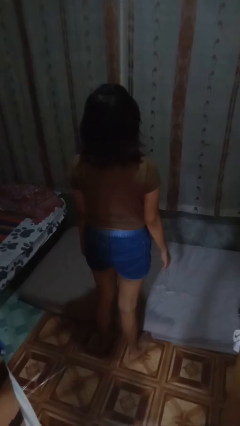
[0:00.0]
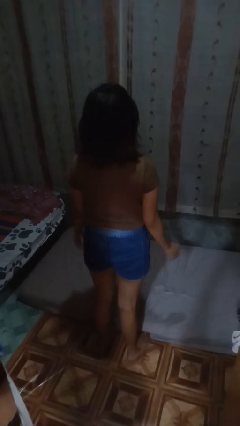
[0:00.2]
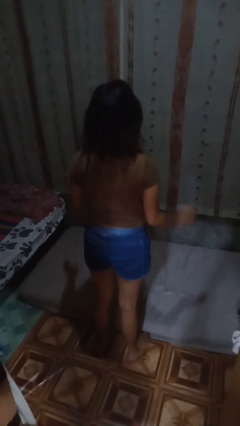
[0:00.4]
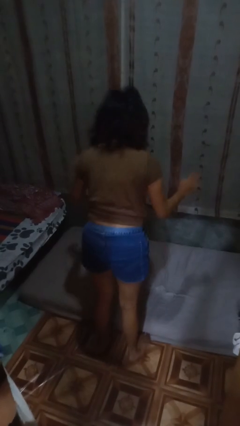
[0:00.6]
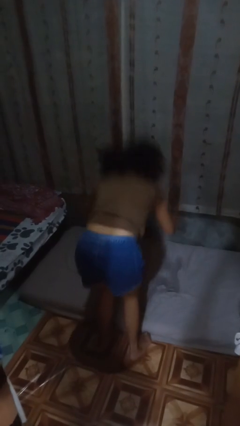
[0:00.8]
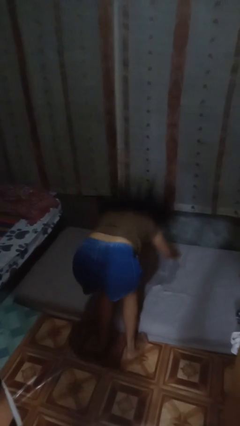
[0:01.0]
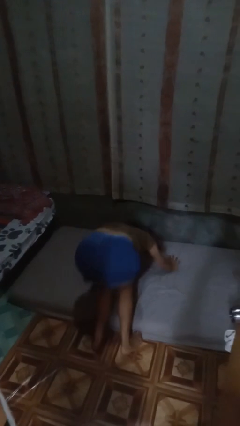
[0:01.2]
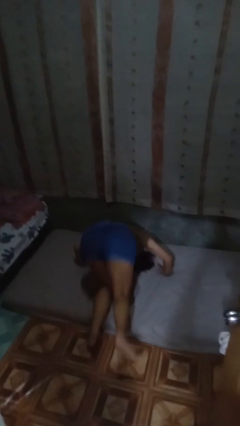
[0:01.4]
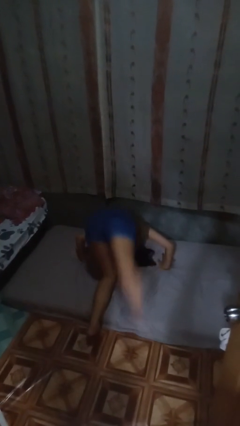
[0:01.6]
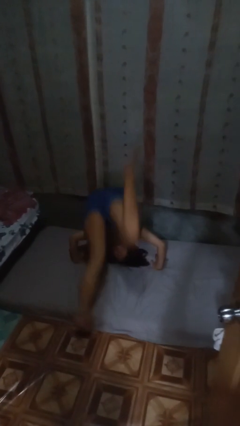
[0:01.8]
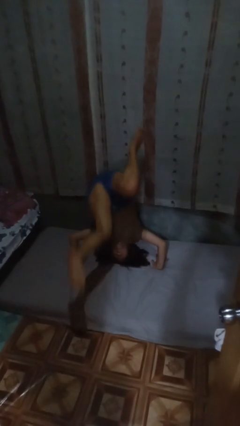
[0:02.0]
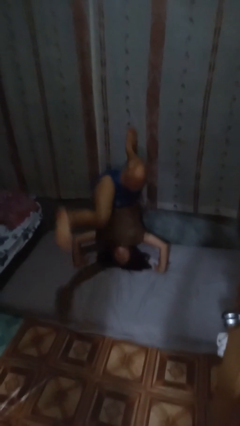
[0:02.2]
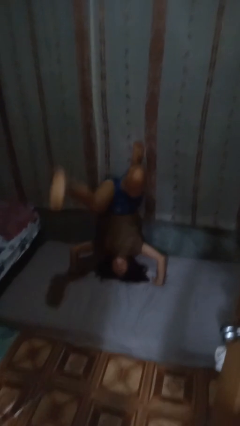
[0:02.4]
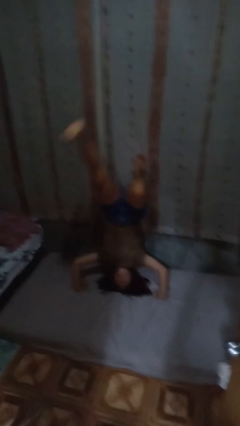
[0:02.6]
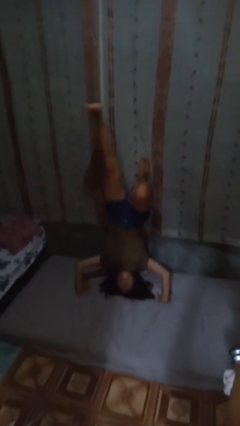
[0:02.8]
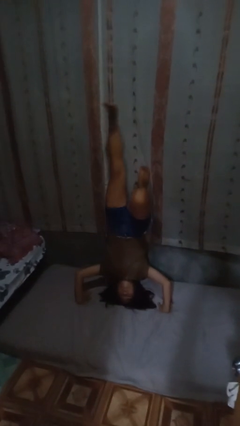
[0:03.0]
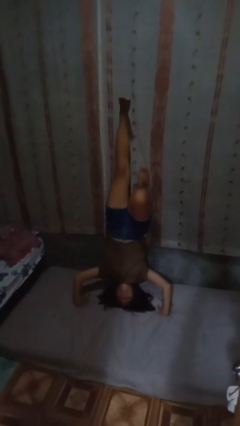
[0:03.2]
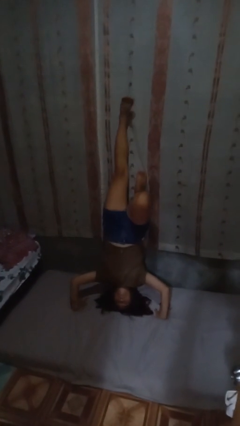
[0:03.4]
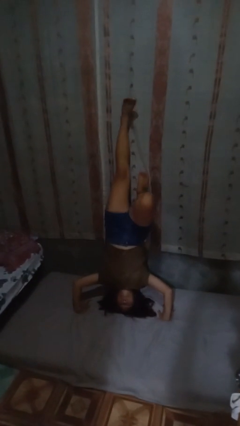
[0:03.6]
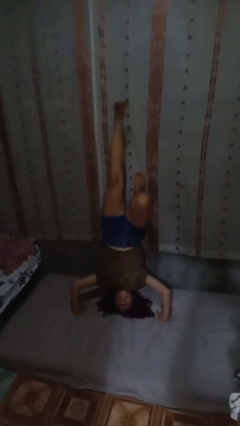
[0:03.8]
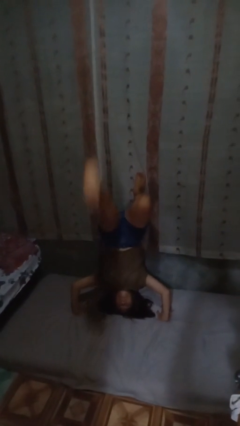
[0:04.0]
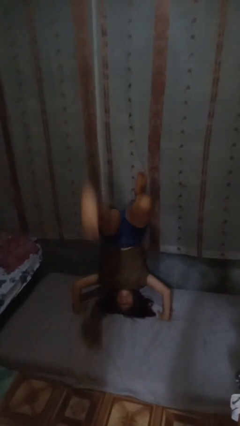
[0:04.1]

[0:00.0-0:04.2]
person handstand

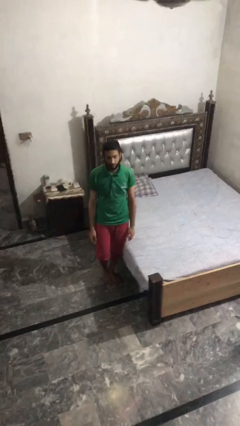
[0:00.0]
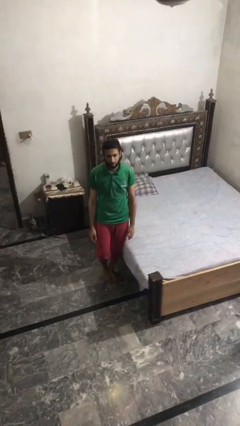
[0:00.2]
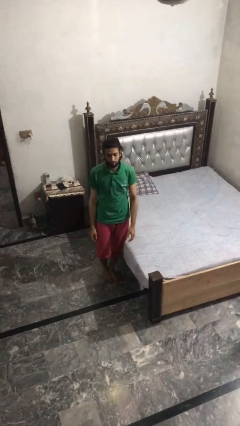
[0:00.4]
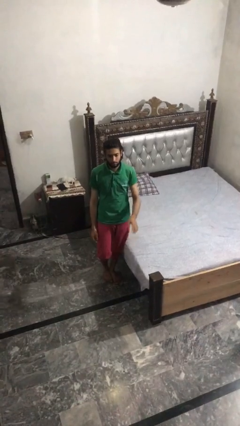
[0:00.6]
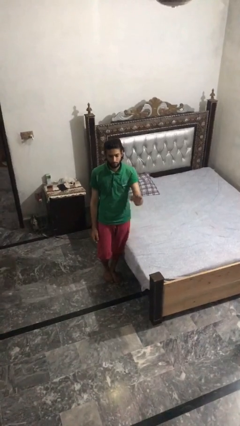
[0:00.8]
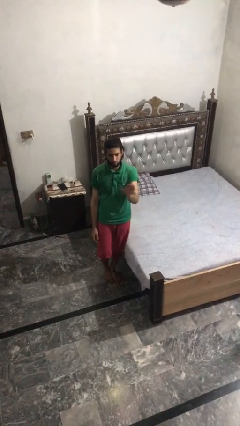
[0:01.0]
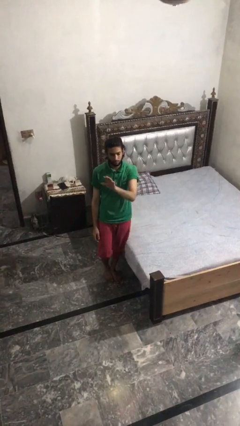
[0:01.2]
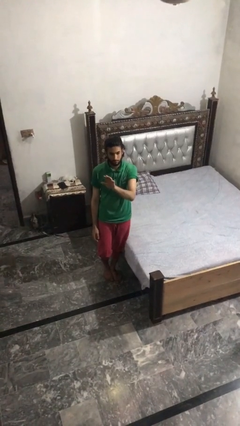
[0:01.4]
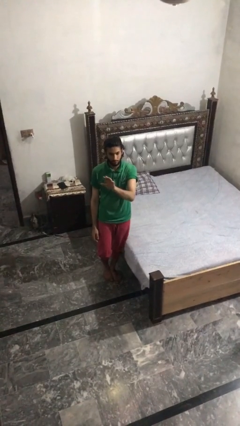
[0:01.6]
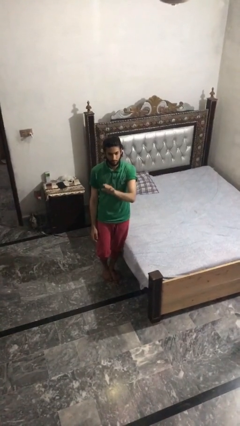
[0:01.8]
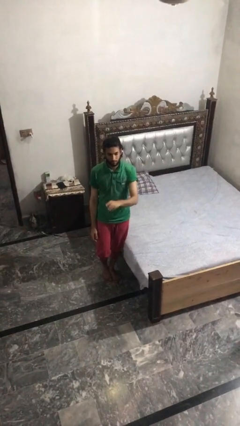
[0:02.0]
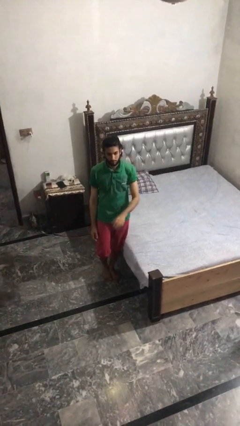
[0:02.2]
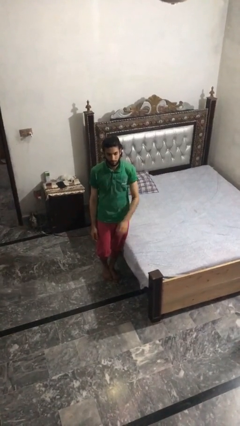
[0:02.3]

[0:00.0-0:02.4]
person gestures swipe left

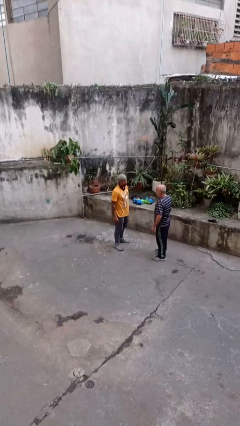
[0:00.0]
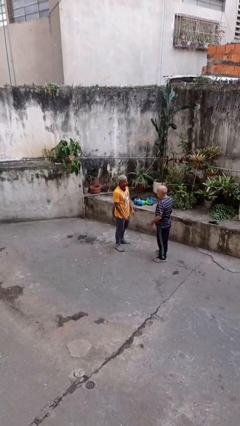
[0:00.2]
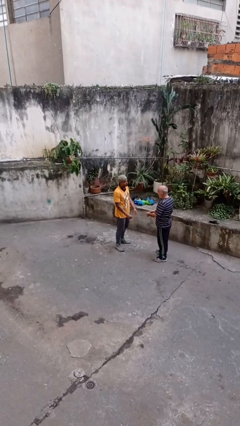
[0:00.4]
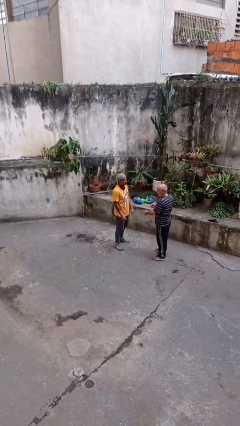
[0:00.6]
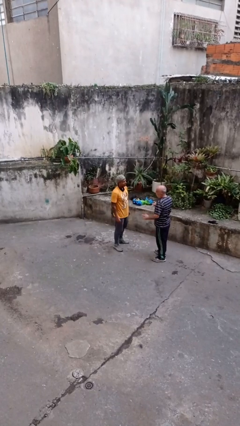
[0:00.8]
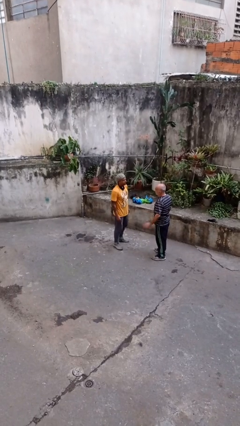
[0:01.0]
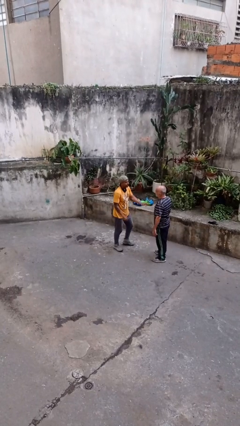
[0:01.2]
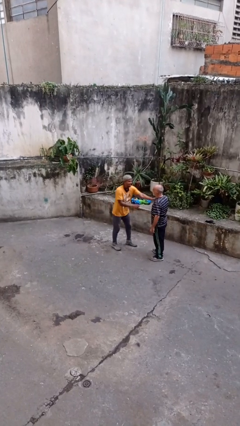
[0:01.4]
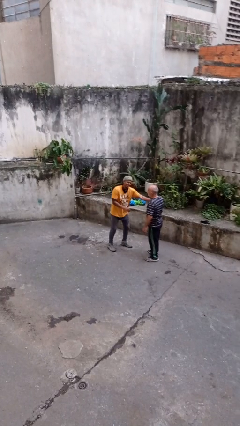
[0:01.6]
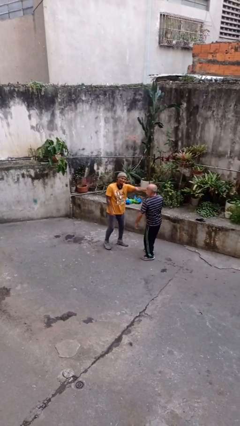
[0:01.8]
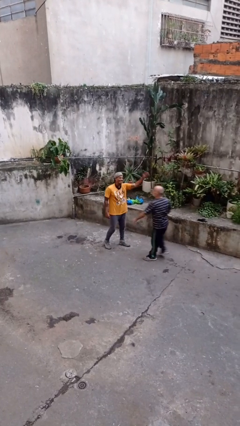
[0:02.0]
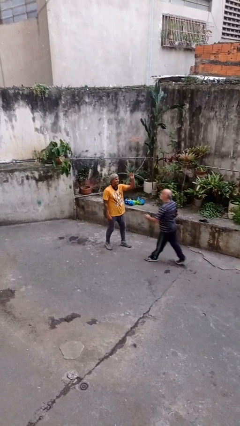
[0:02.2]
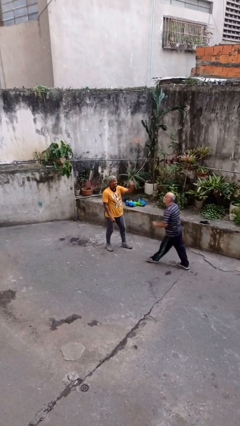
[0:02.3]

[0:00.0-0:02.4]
person shoves person

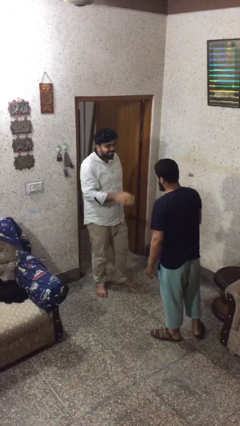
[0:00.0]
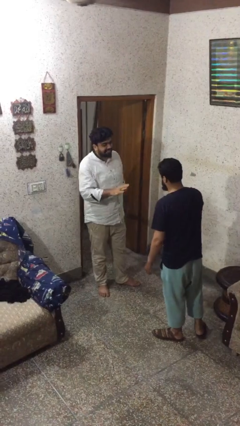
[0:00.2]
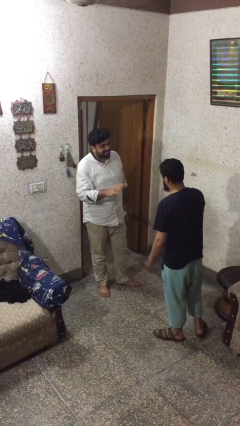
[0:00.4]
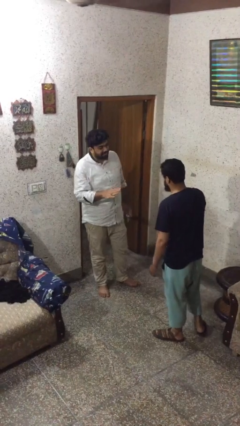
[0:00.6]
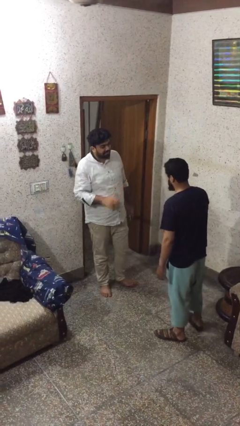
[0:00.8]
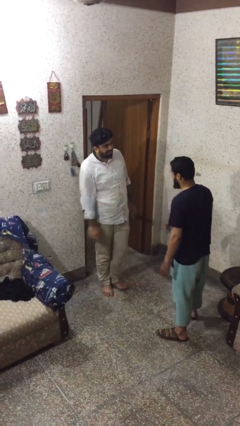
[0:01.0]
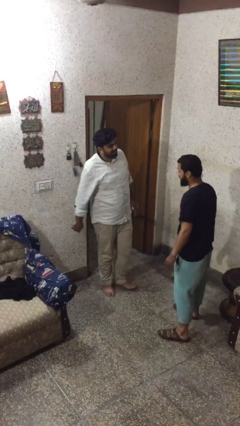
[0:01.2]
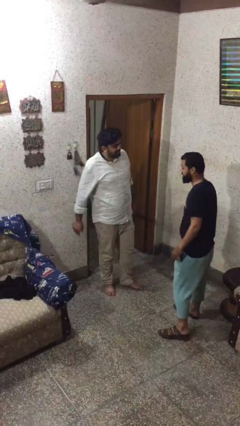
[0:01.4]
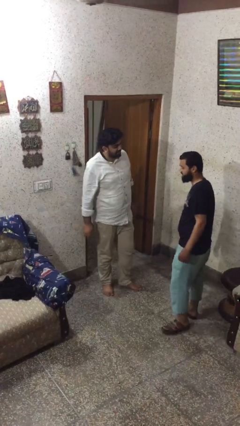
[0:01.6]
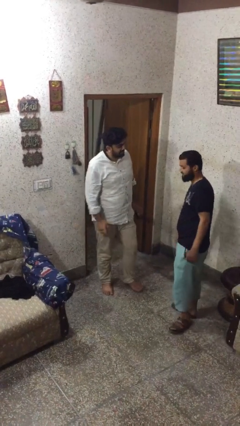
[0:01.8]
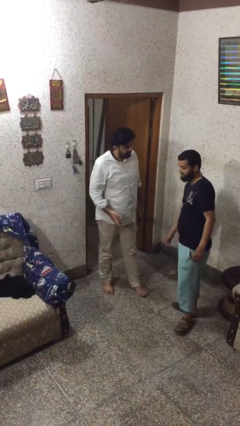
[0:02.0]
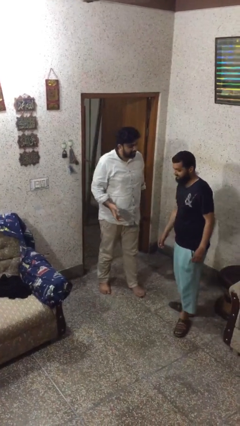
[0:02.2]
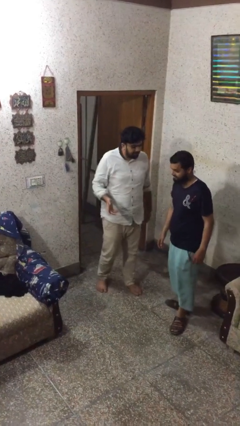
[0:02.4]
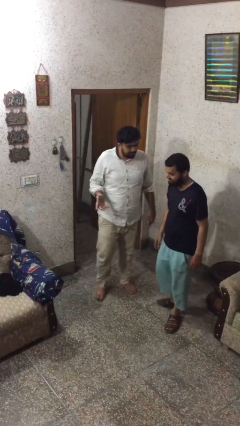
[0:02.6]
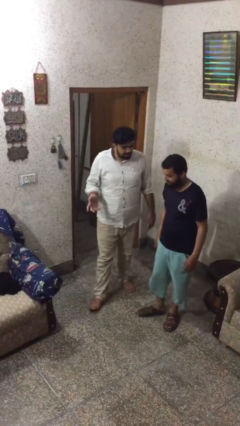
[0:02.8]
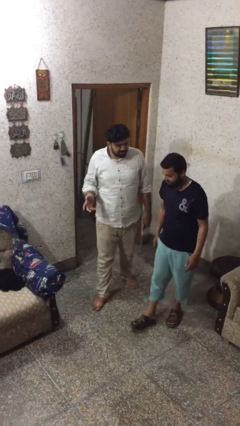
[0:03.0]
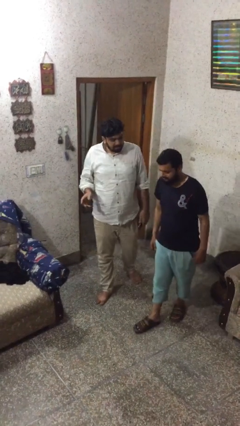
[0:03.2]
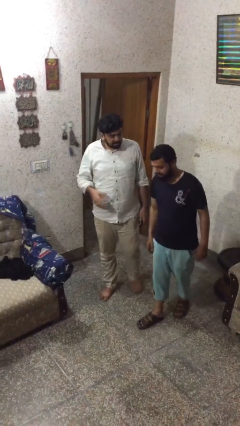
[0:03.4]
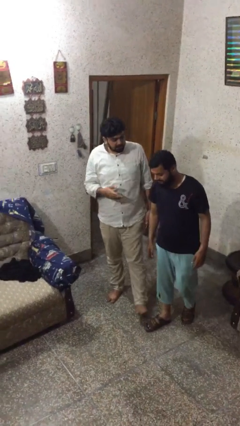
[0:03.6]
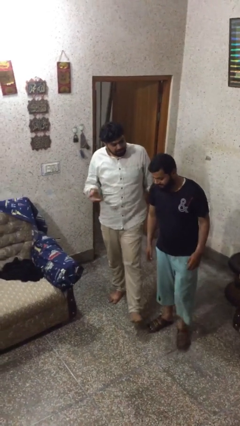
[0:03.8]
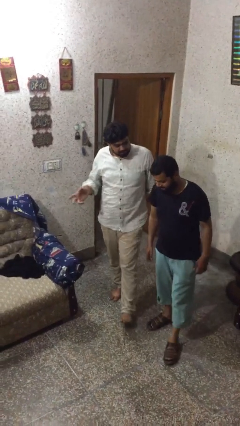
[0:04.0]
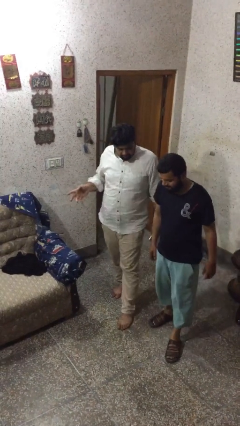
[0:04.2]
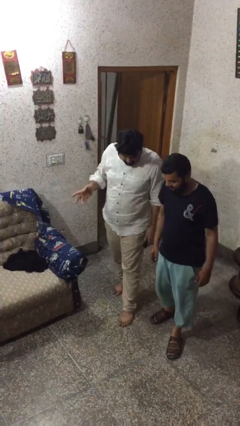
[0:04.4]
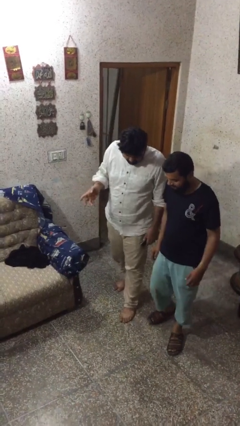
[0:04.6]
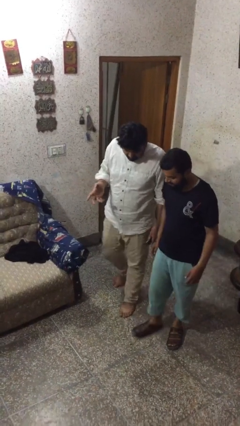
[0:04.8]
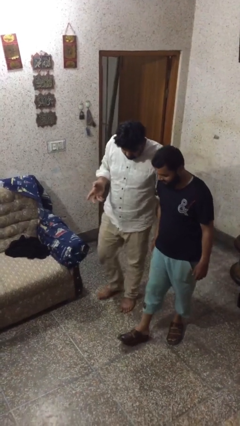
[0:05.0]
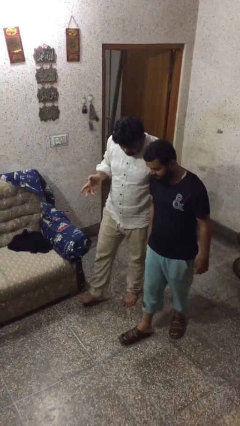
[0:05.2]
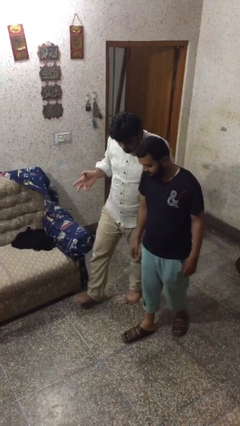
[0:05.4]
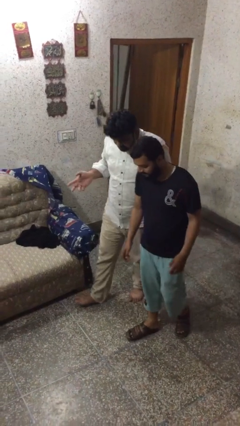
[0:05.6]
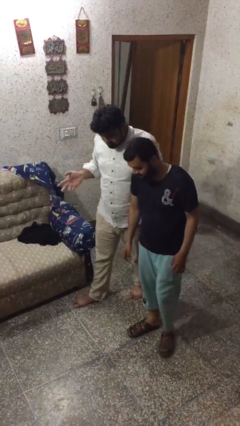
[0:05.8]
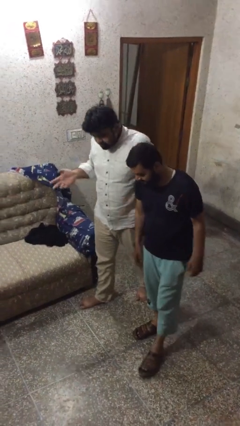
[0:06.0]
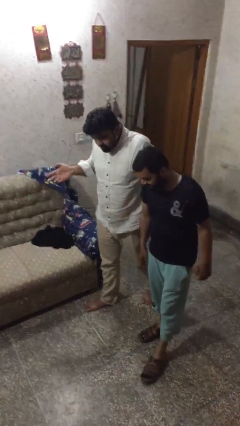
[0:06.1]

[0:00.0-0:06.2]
person talks to person

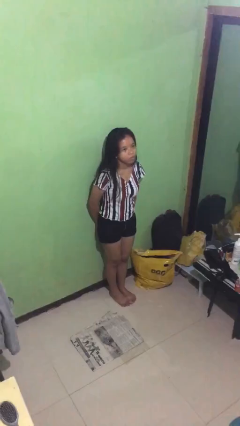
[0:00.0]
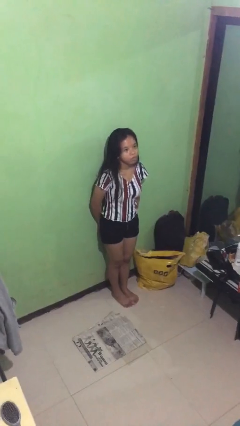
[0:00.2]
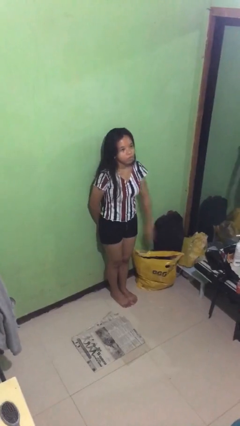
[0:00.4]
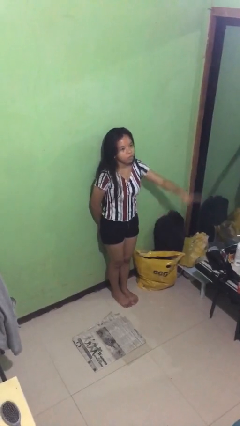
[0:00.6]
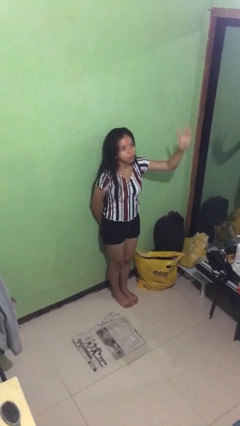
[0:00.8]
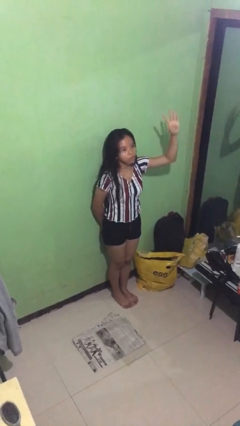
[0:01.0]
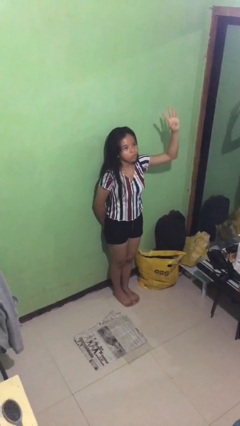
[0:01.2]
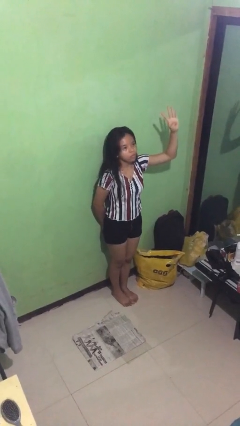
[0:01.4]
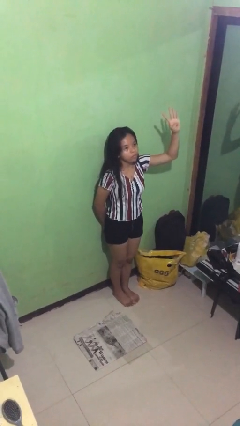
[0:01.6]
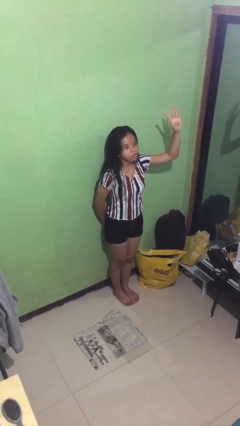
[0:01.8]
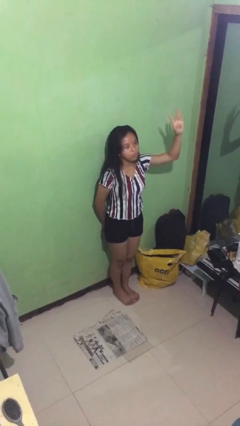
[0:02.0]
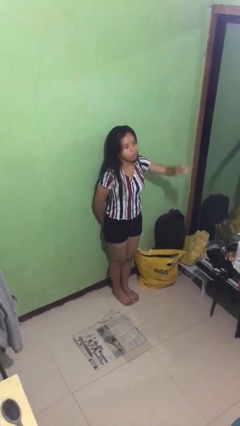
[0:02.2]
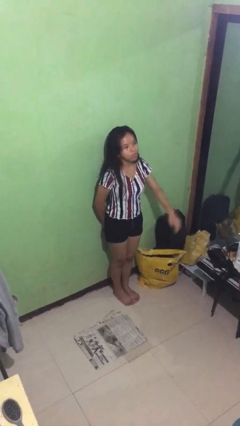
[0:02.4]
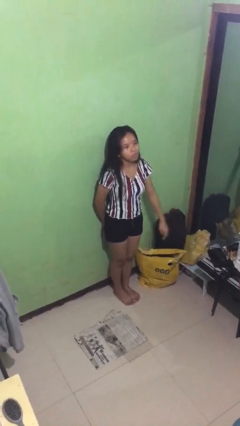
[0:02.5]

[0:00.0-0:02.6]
person gestures number four
